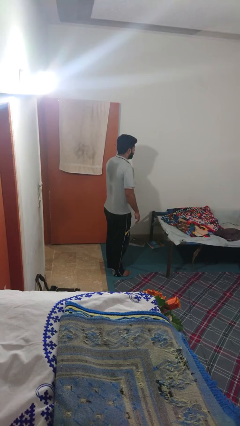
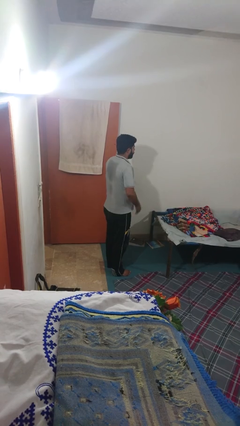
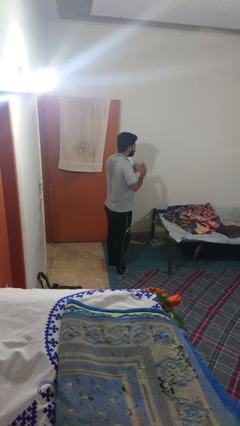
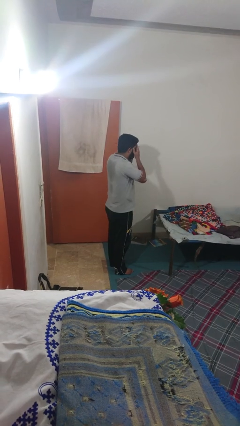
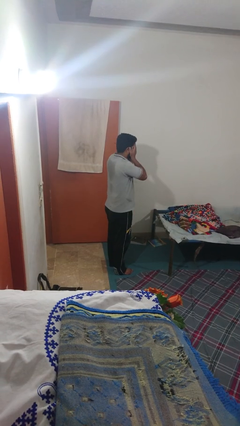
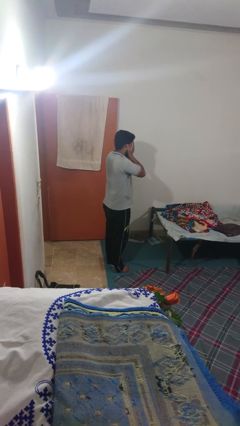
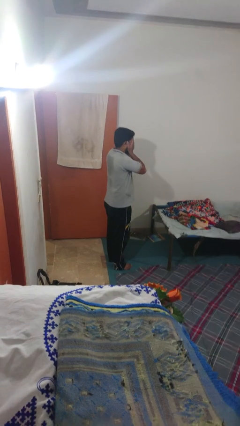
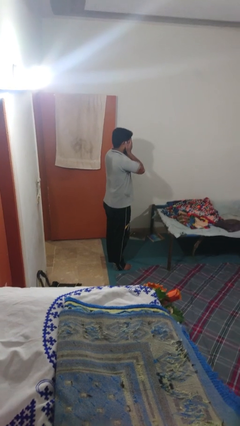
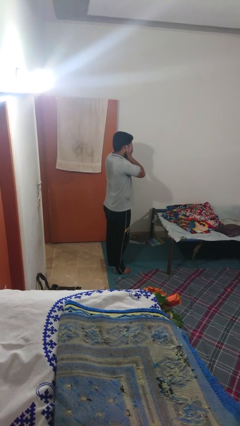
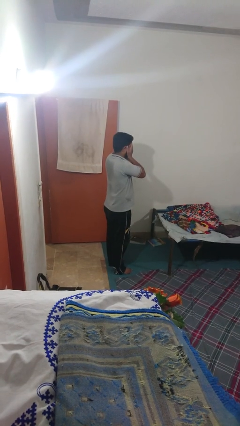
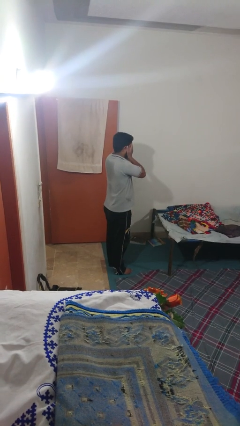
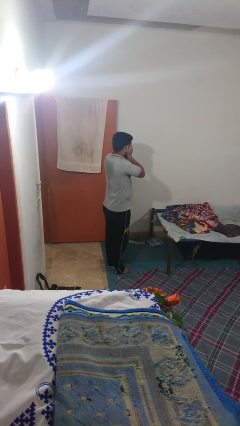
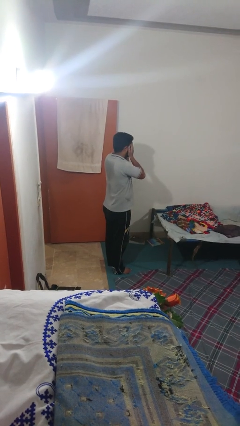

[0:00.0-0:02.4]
person covers face with hands

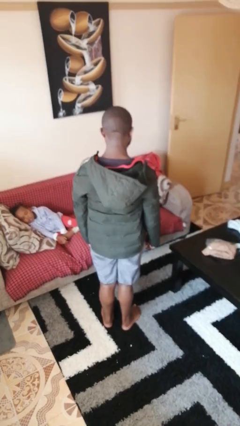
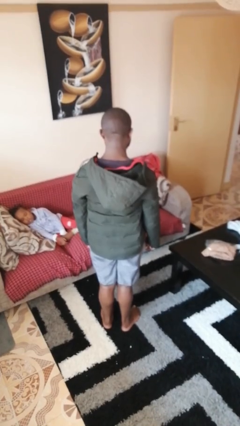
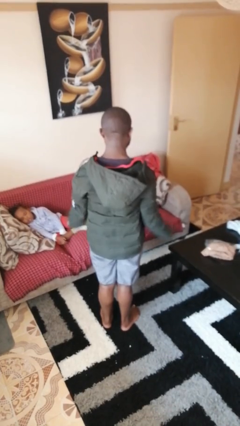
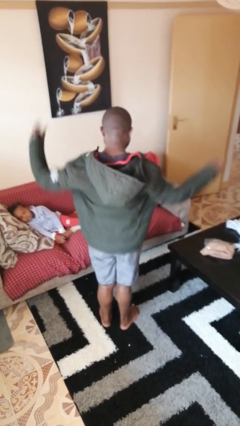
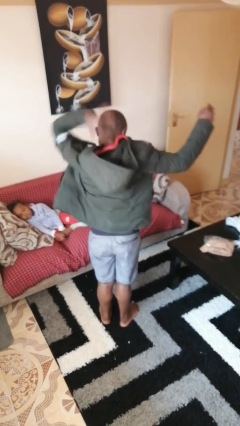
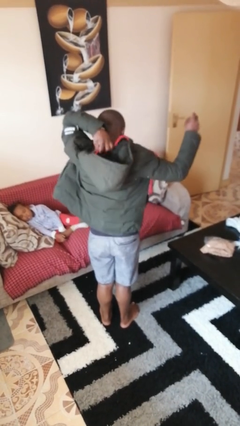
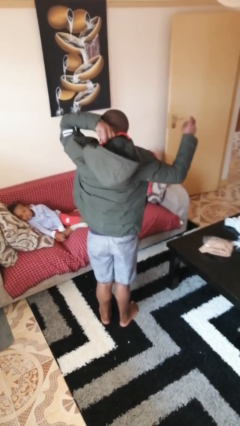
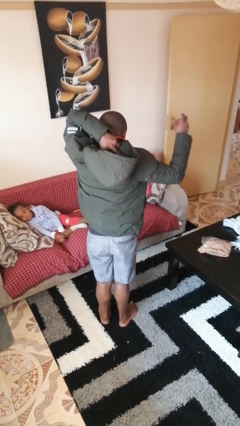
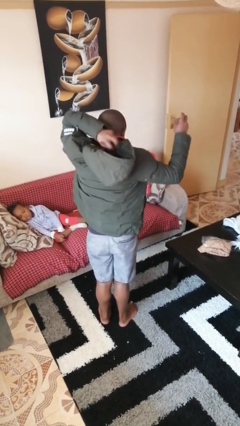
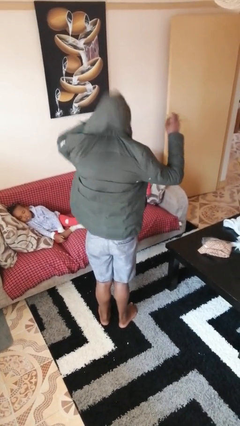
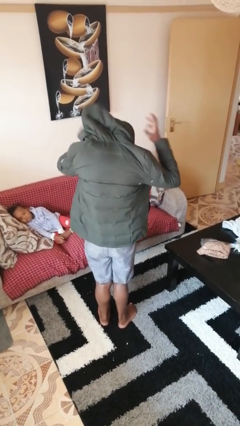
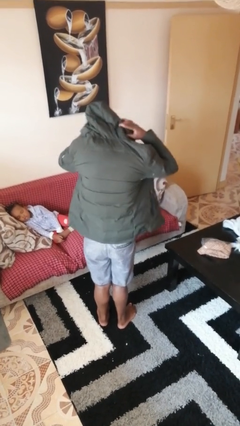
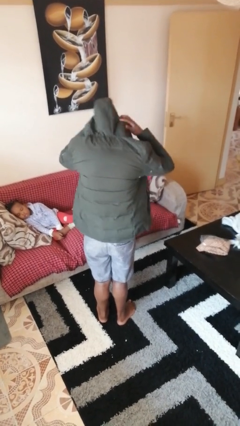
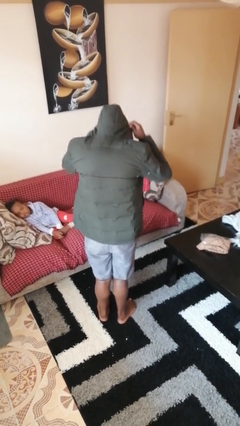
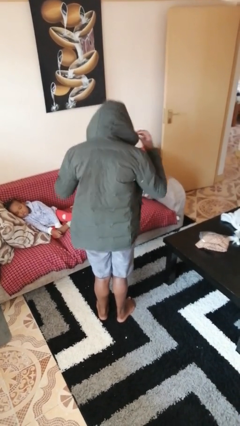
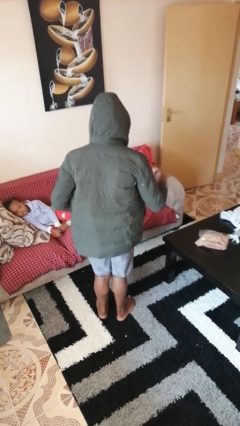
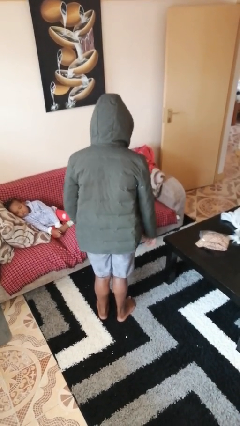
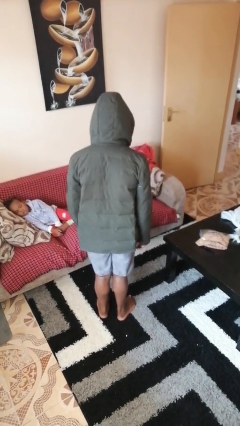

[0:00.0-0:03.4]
person puts on hoodie

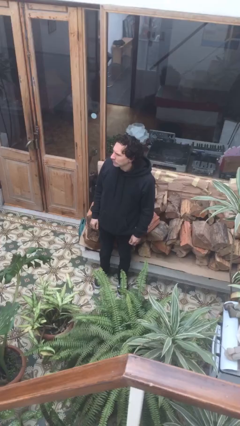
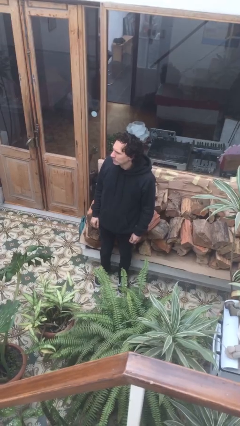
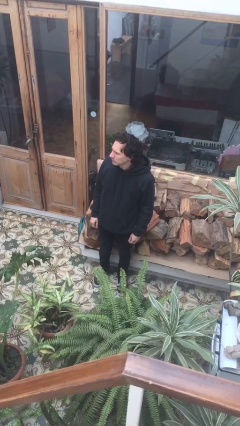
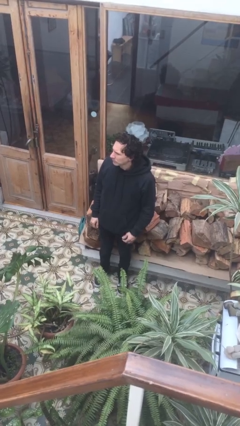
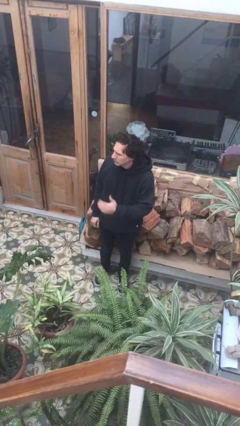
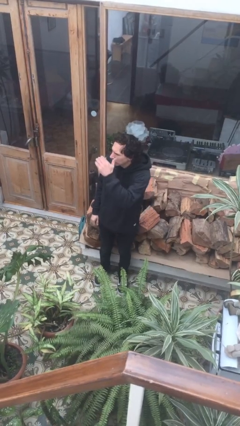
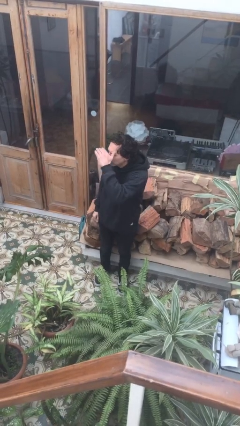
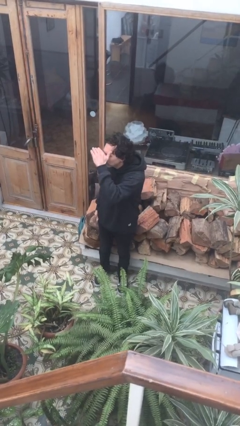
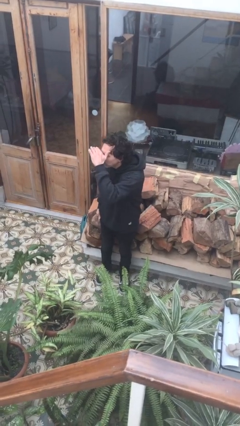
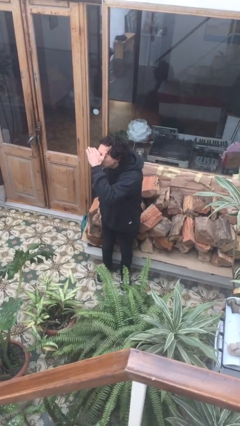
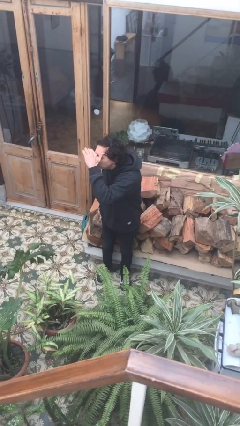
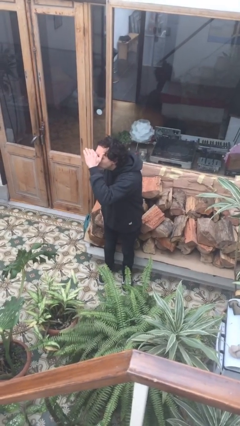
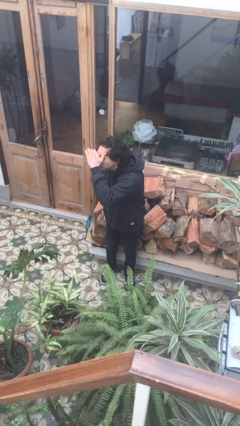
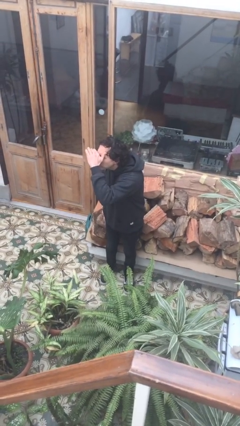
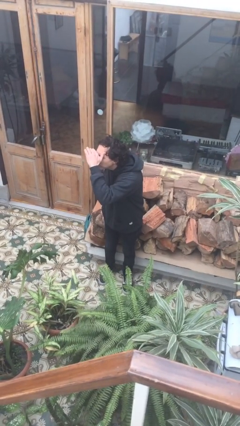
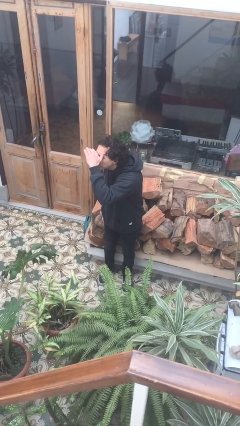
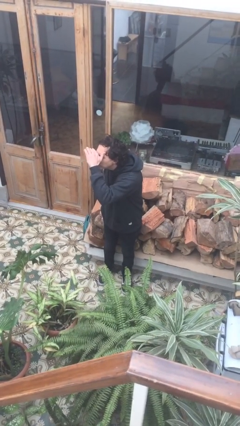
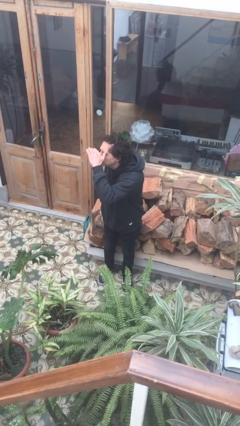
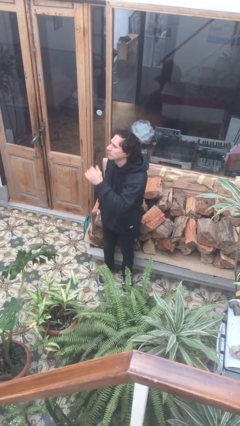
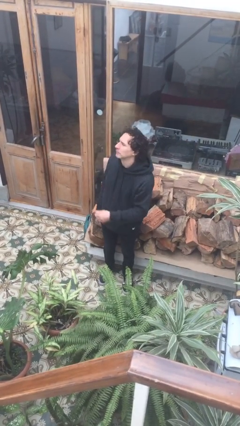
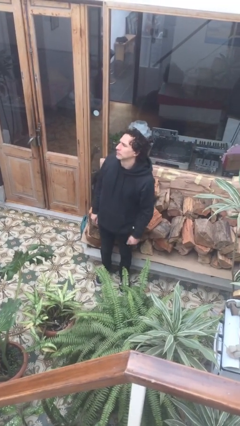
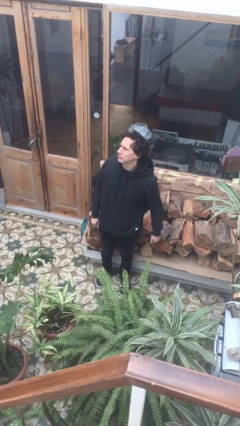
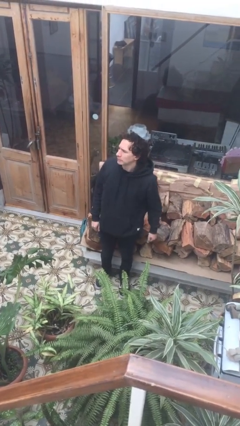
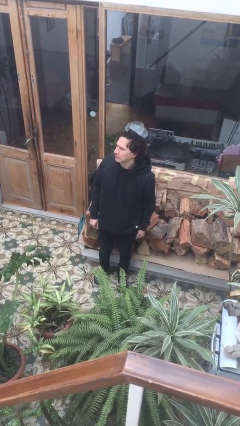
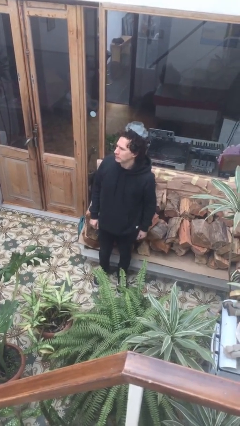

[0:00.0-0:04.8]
person shades eyes

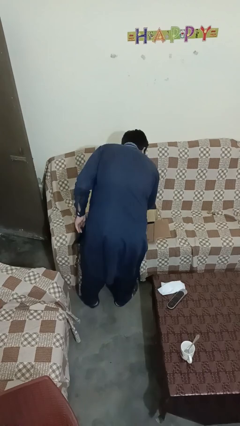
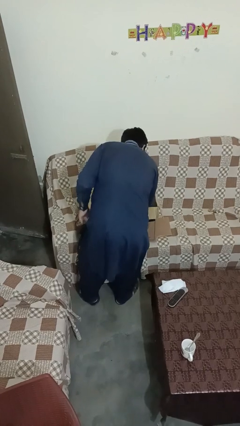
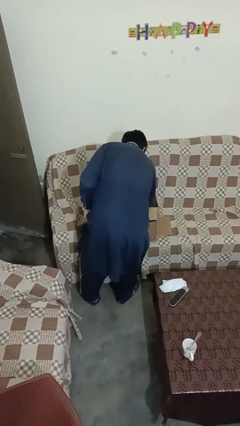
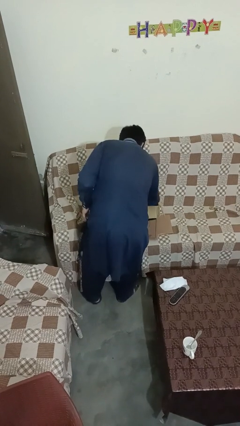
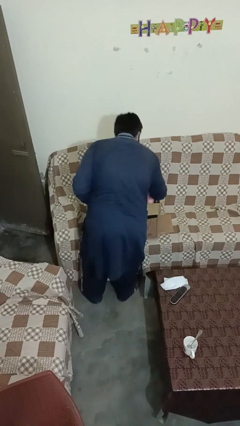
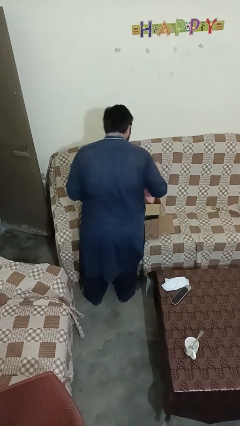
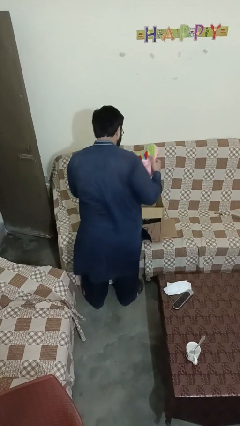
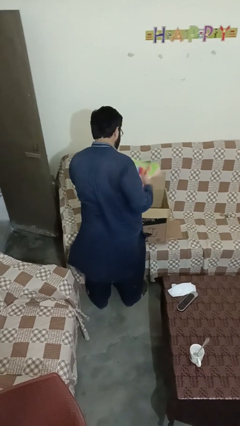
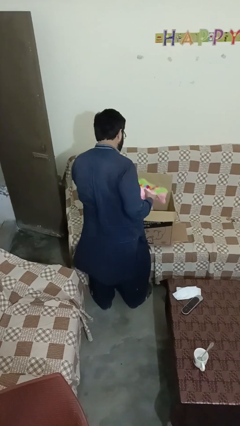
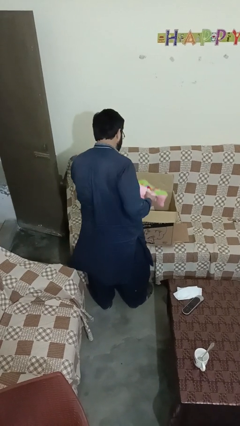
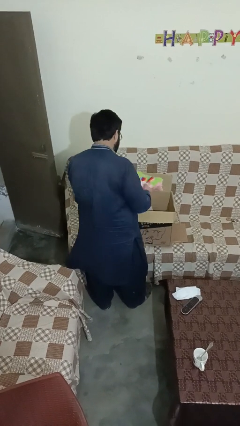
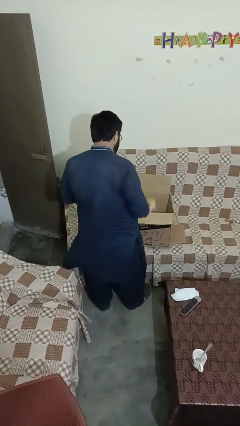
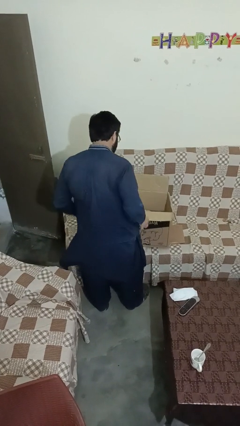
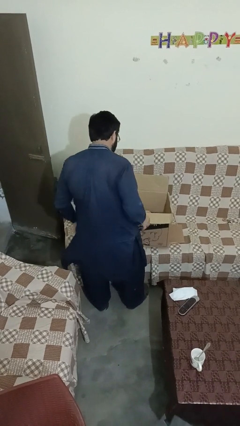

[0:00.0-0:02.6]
person searches in box

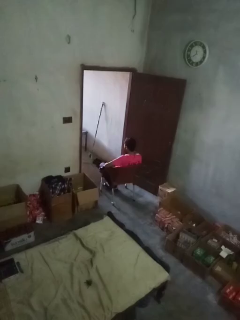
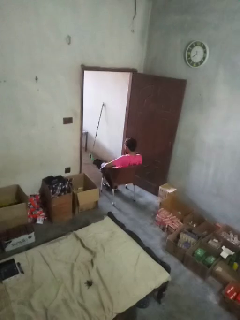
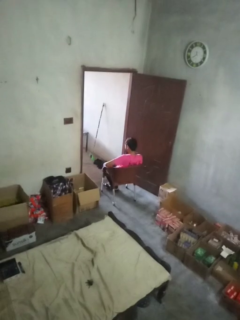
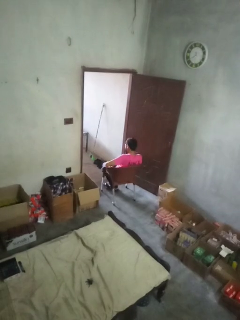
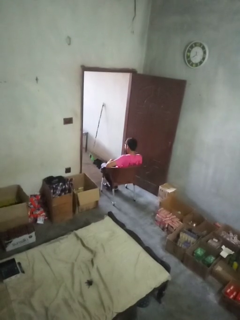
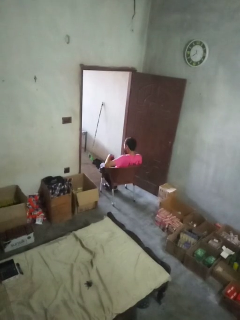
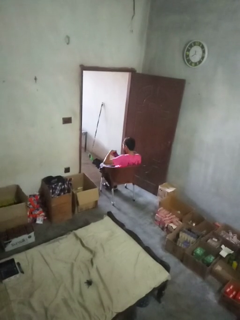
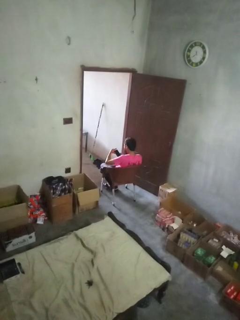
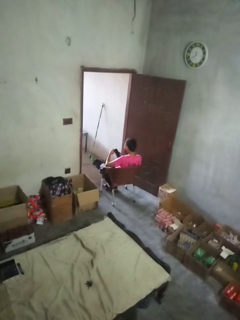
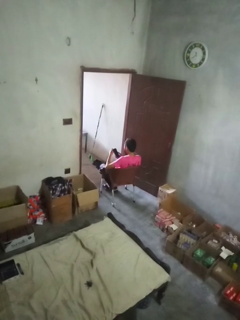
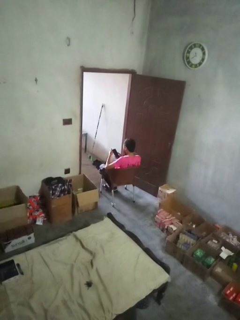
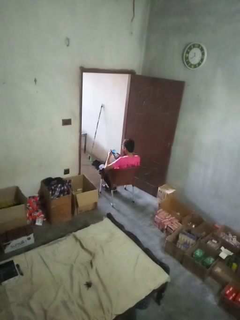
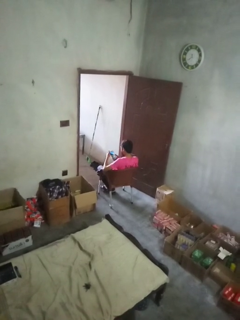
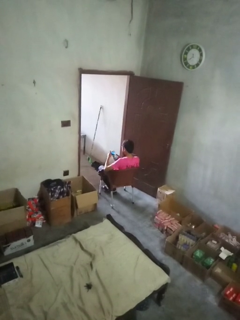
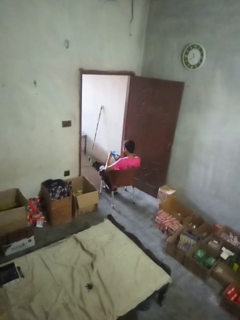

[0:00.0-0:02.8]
person takes phone from pocket

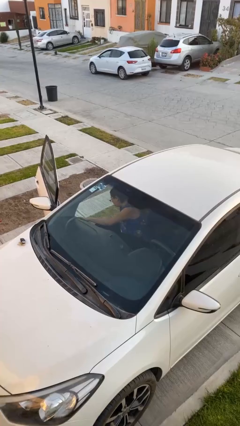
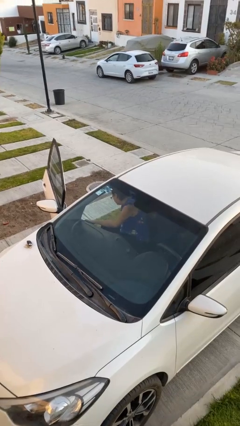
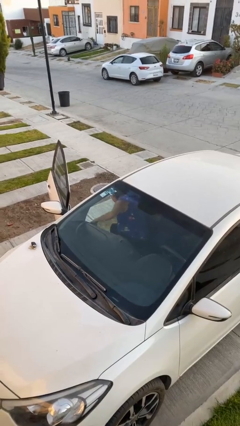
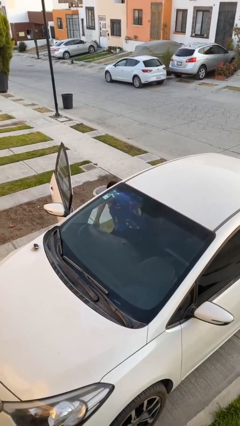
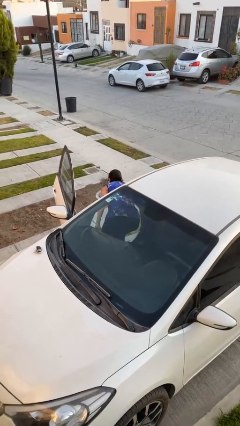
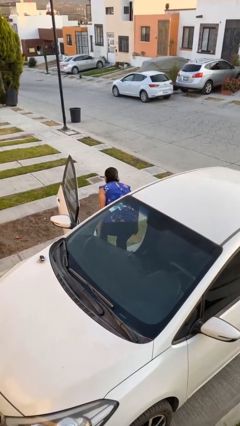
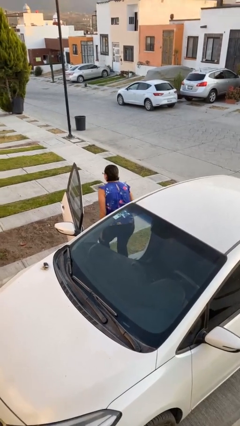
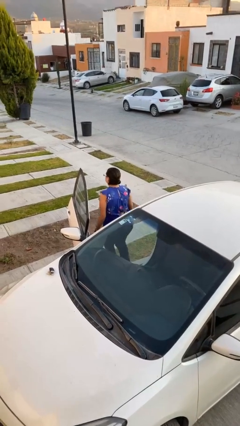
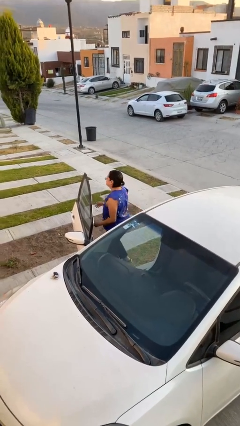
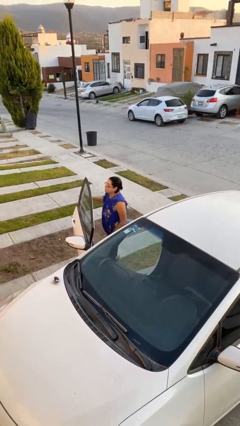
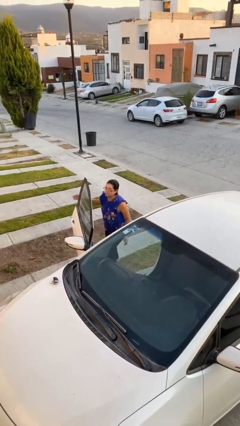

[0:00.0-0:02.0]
person exits car
